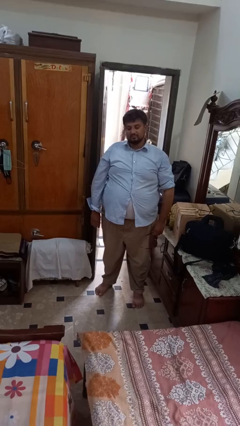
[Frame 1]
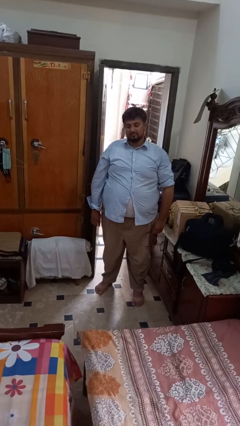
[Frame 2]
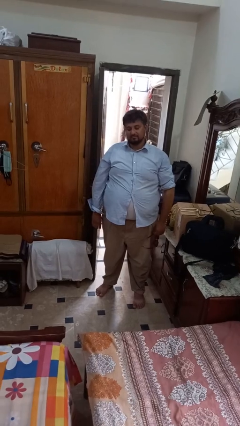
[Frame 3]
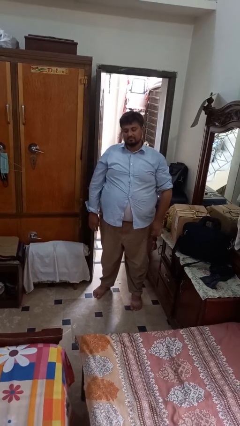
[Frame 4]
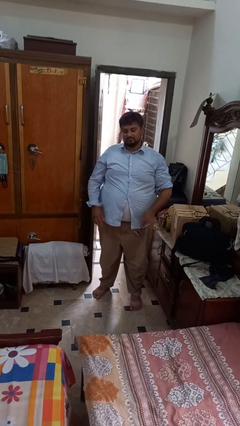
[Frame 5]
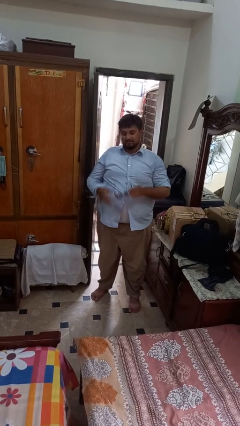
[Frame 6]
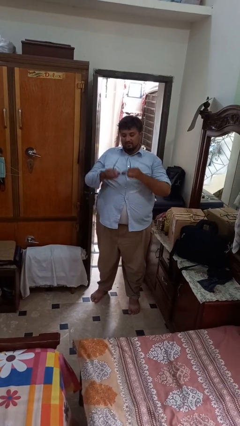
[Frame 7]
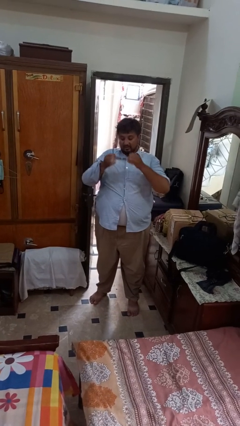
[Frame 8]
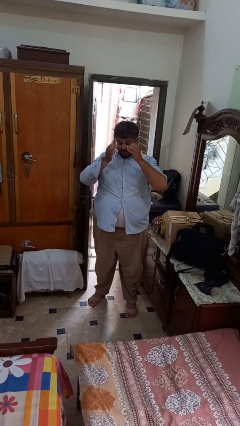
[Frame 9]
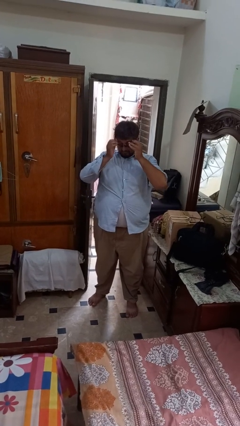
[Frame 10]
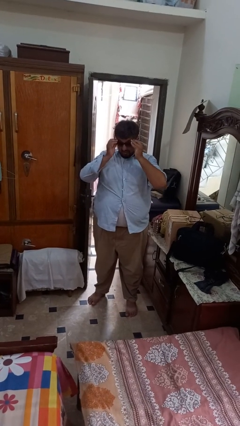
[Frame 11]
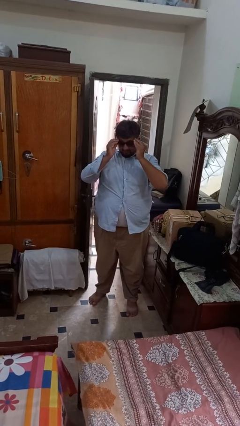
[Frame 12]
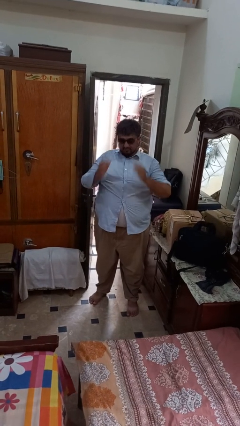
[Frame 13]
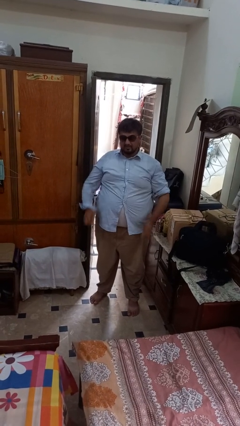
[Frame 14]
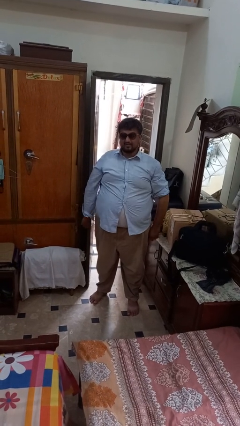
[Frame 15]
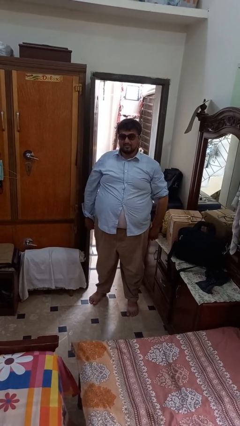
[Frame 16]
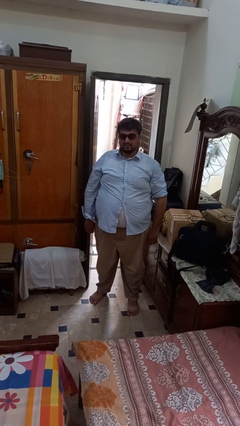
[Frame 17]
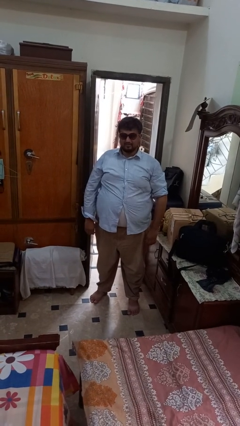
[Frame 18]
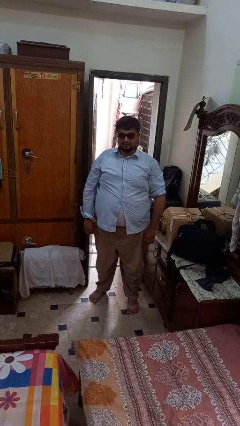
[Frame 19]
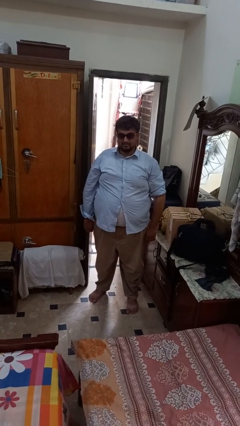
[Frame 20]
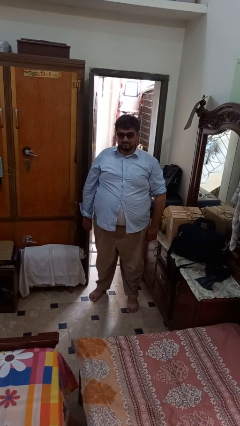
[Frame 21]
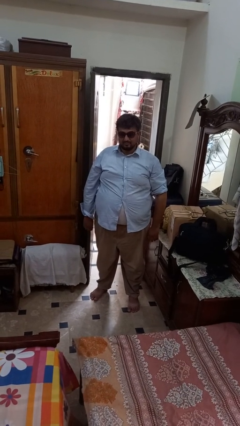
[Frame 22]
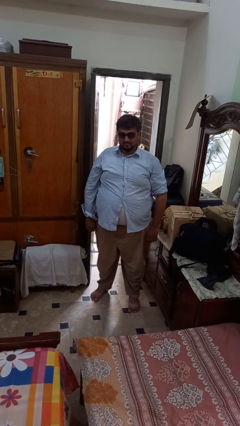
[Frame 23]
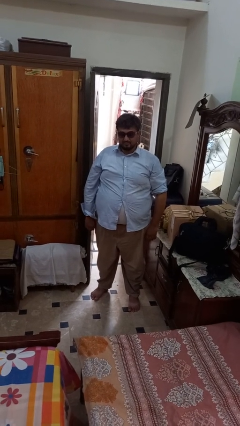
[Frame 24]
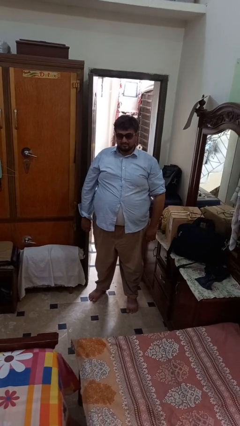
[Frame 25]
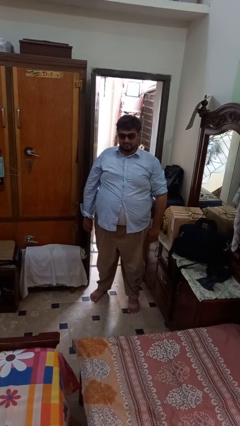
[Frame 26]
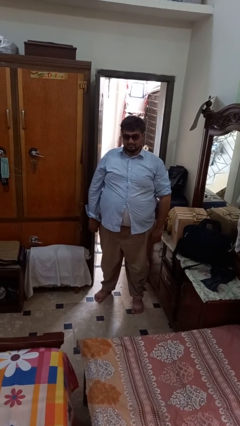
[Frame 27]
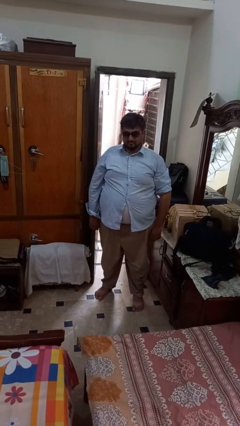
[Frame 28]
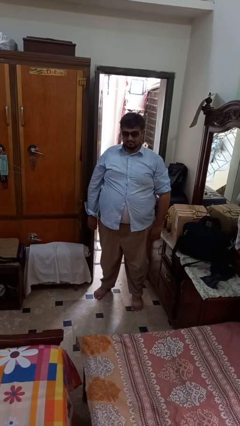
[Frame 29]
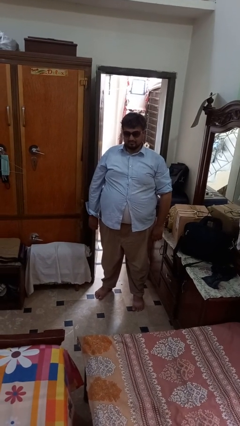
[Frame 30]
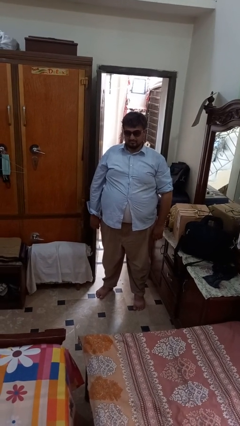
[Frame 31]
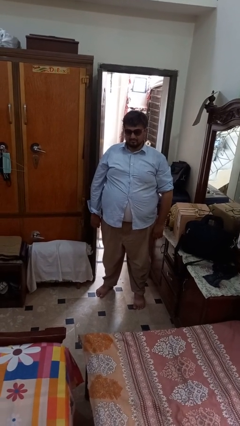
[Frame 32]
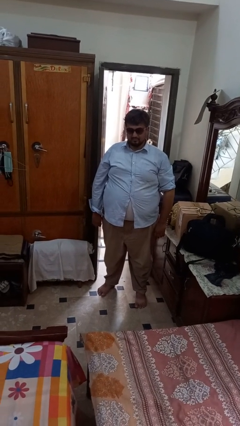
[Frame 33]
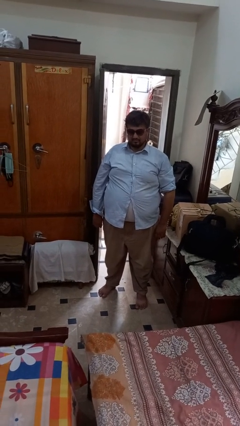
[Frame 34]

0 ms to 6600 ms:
person puts on sunglasses

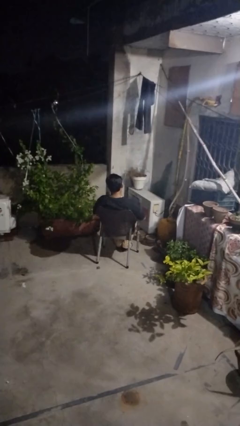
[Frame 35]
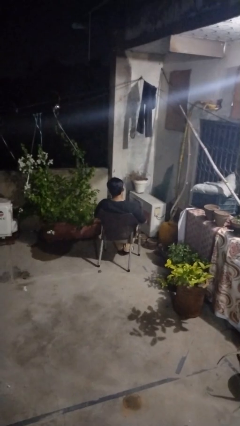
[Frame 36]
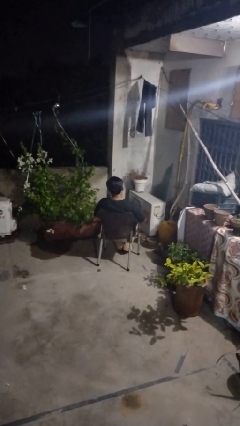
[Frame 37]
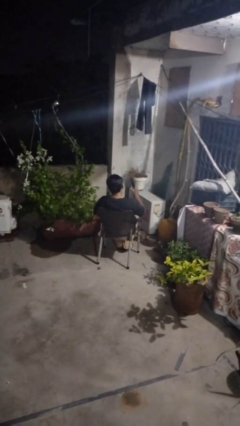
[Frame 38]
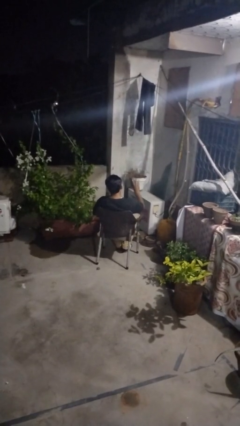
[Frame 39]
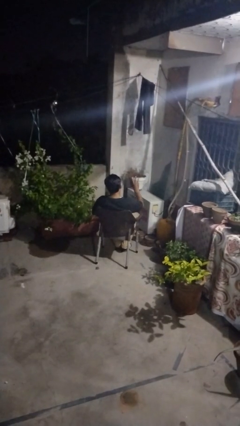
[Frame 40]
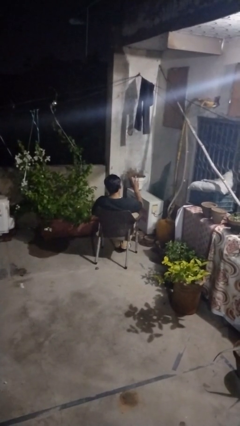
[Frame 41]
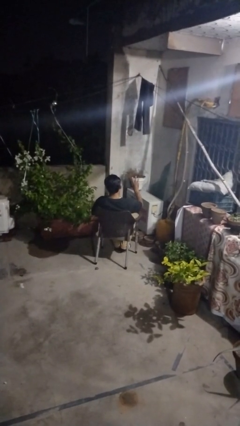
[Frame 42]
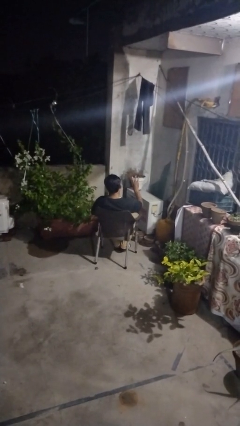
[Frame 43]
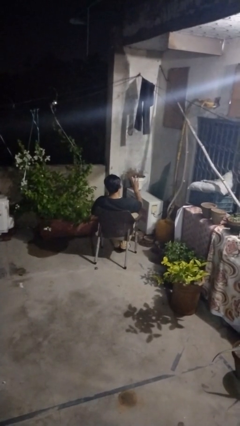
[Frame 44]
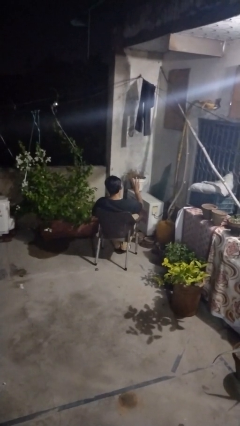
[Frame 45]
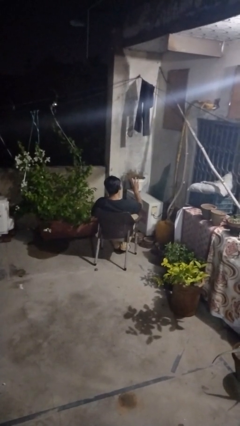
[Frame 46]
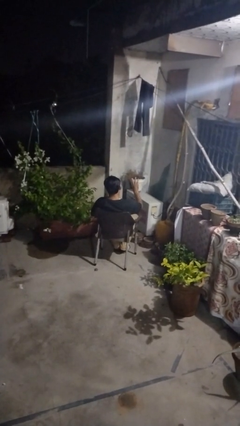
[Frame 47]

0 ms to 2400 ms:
person gestures number three

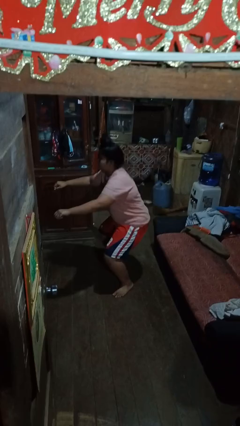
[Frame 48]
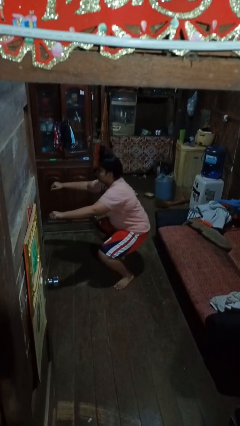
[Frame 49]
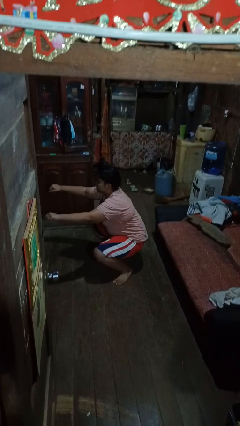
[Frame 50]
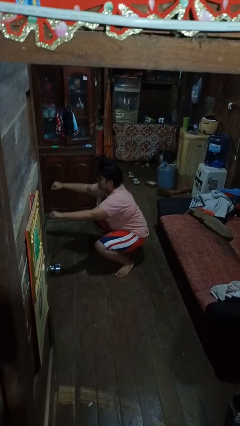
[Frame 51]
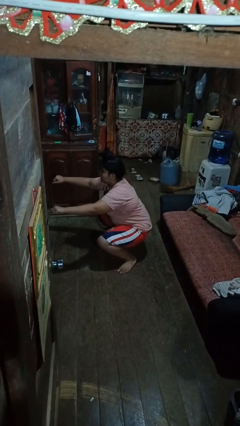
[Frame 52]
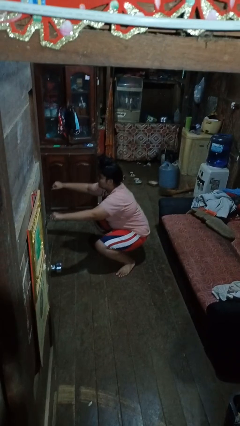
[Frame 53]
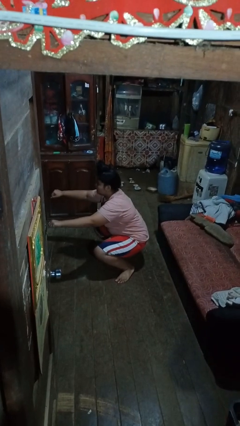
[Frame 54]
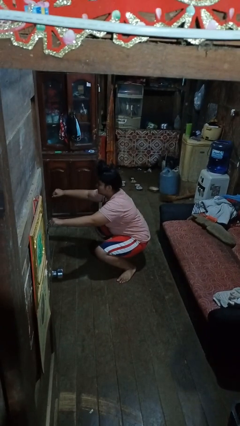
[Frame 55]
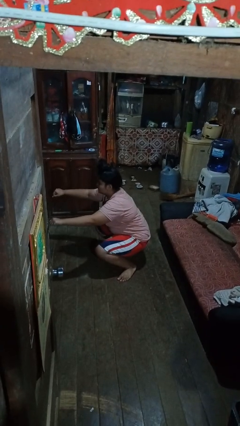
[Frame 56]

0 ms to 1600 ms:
person squats

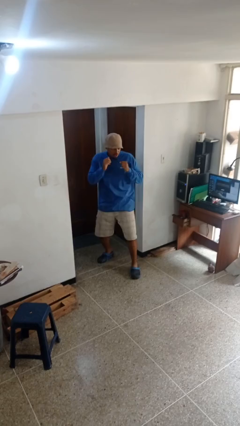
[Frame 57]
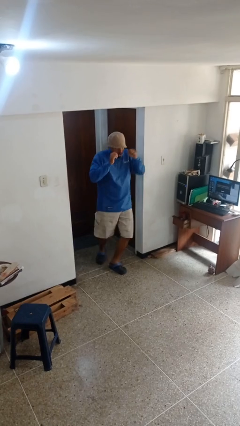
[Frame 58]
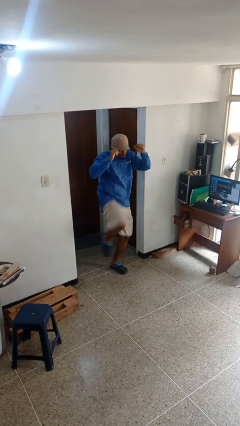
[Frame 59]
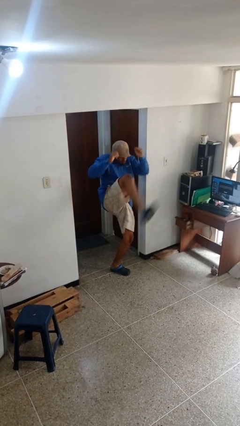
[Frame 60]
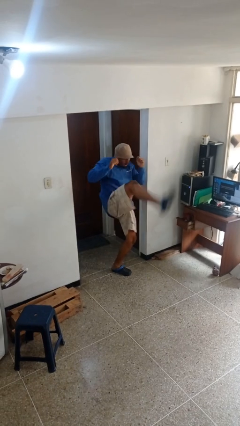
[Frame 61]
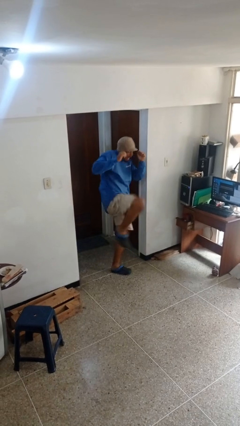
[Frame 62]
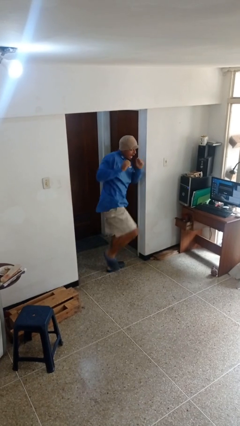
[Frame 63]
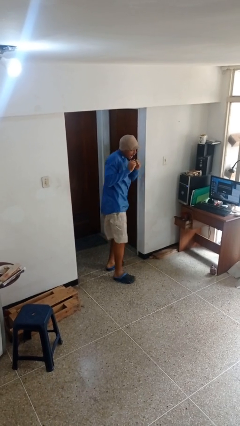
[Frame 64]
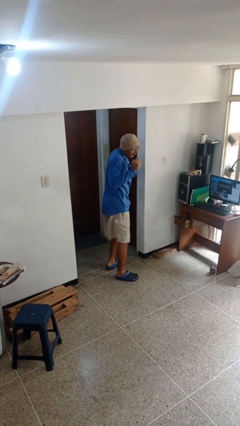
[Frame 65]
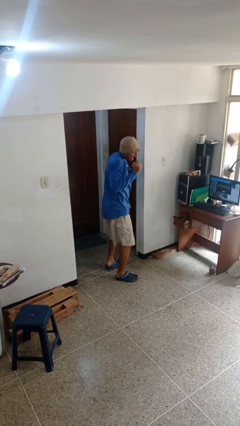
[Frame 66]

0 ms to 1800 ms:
person karate kicks

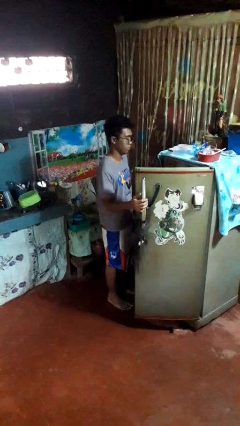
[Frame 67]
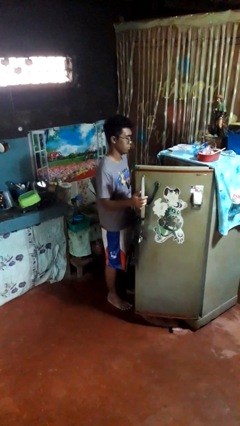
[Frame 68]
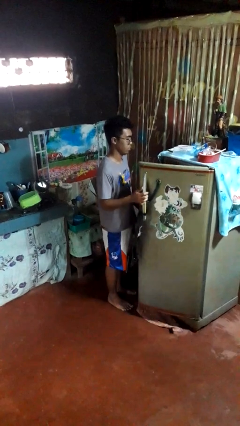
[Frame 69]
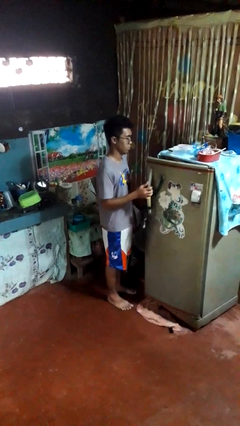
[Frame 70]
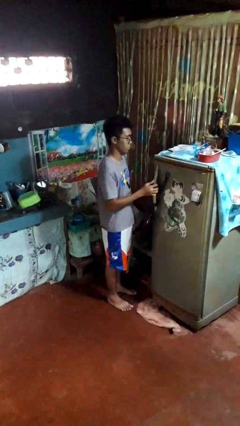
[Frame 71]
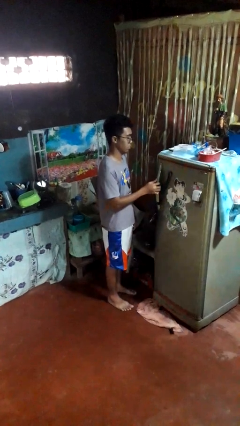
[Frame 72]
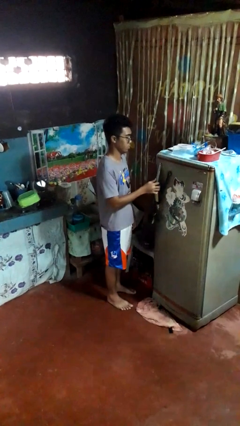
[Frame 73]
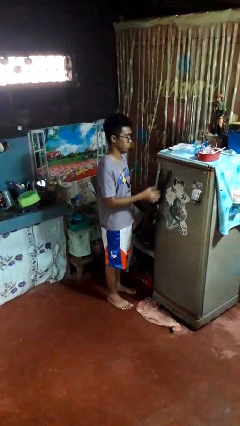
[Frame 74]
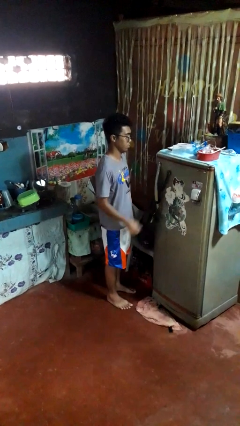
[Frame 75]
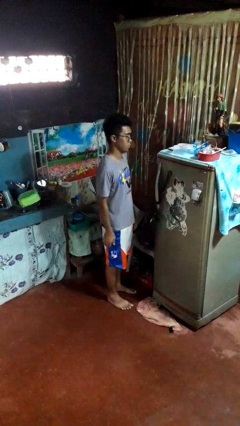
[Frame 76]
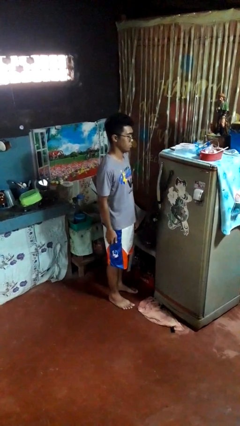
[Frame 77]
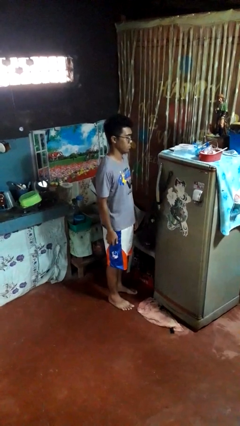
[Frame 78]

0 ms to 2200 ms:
person closes refrigerator

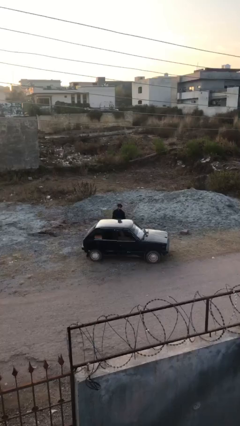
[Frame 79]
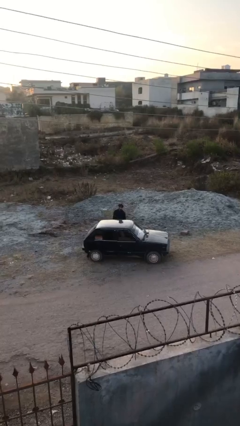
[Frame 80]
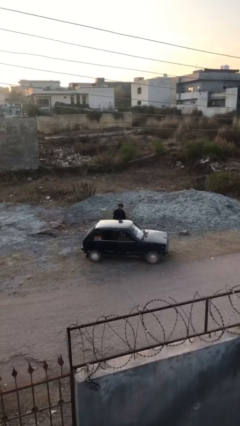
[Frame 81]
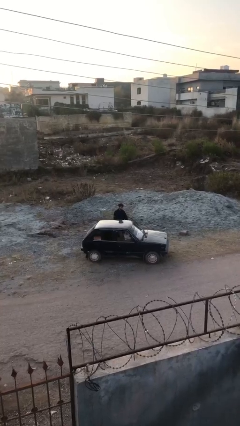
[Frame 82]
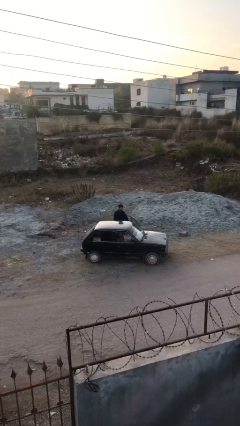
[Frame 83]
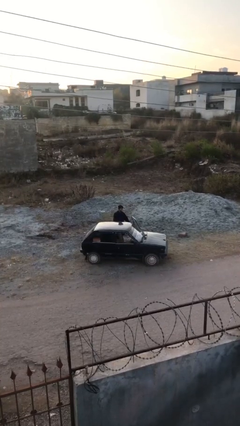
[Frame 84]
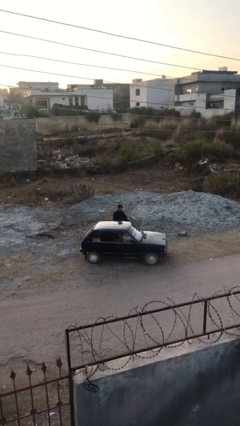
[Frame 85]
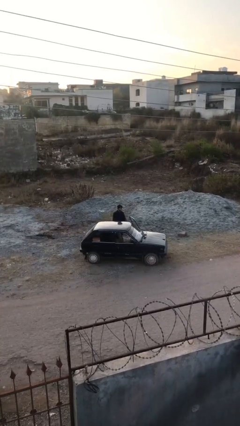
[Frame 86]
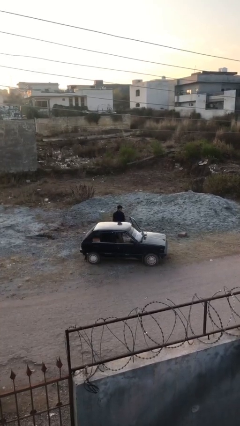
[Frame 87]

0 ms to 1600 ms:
person opens car door

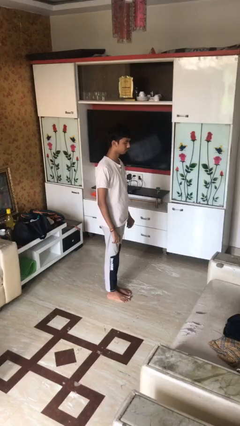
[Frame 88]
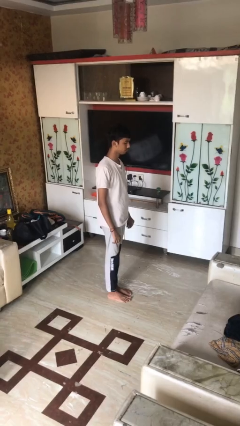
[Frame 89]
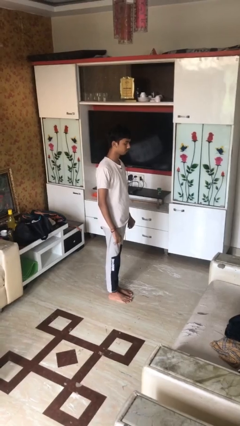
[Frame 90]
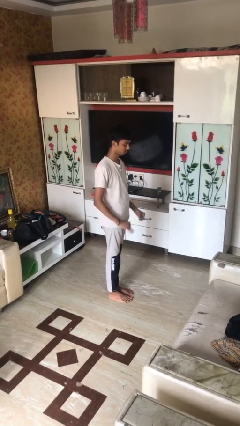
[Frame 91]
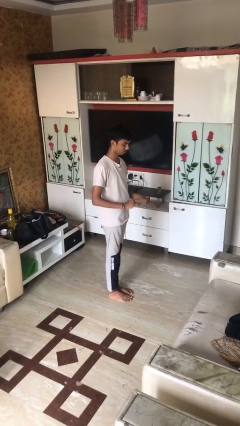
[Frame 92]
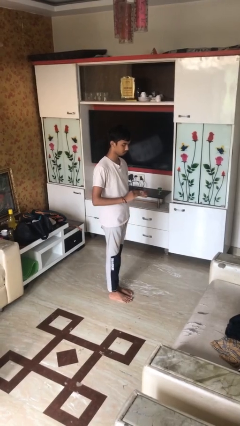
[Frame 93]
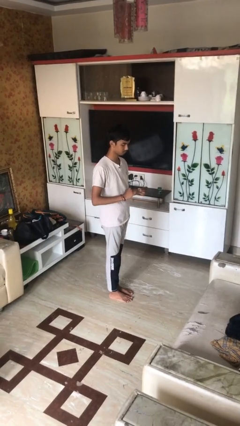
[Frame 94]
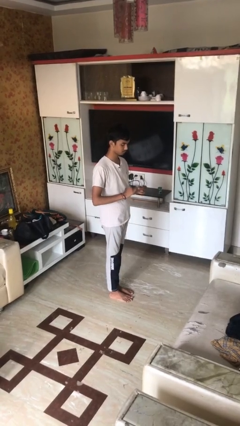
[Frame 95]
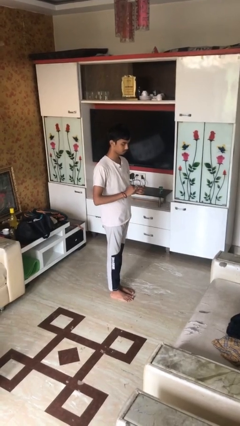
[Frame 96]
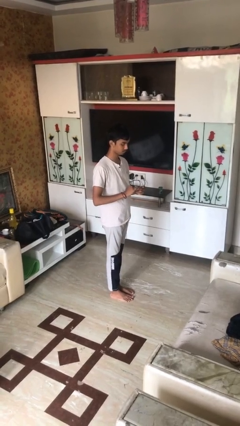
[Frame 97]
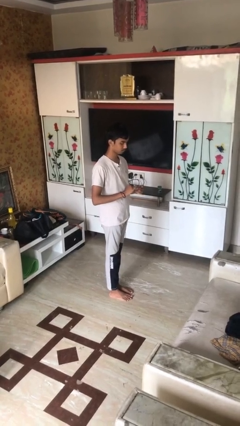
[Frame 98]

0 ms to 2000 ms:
person puts on ring
